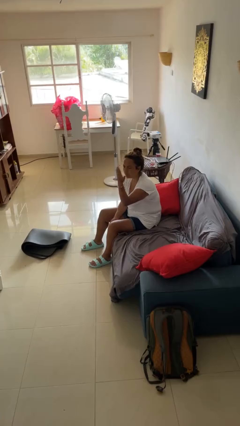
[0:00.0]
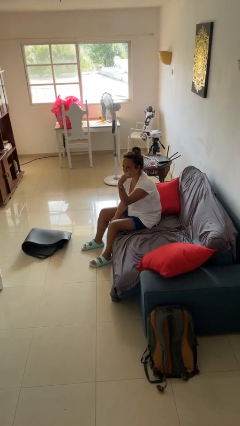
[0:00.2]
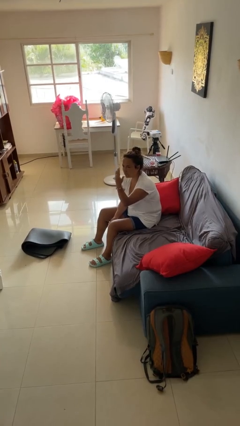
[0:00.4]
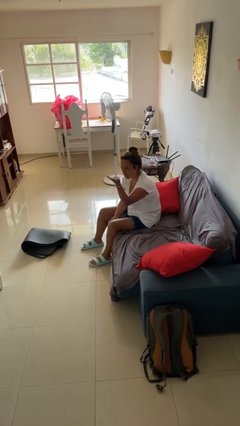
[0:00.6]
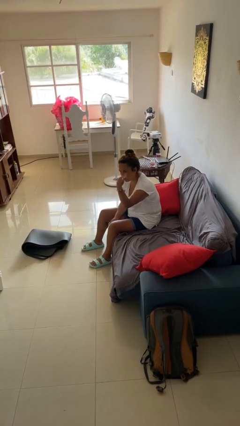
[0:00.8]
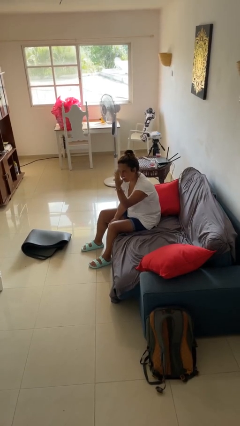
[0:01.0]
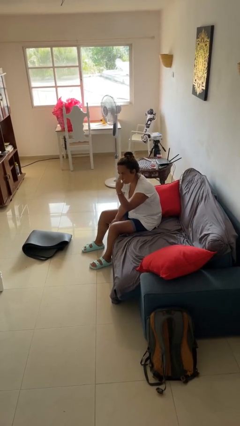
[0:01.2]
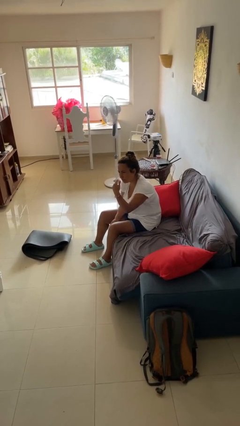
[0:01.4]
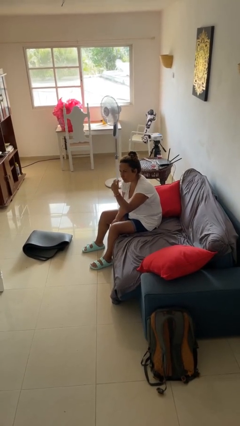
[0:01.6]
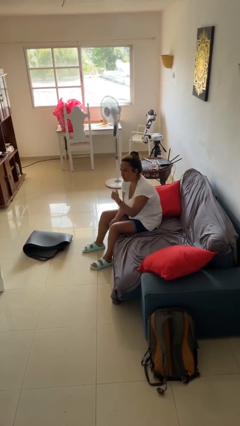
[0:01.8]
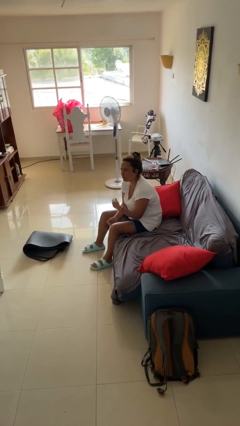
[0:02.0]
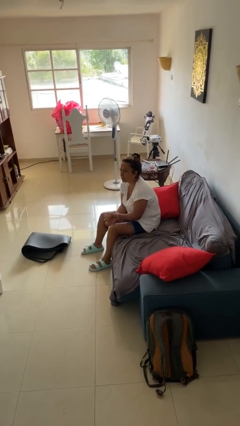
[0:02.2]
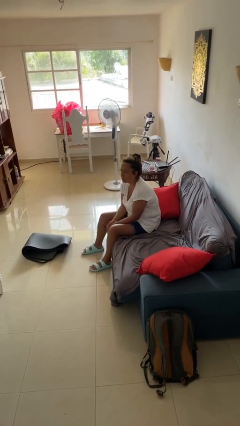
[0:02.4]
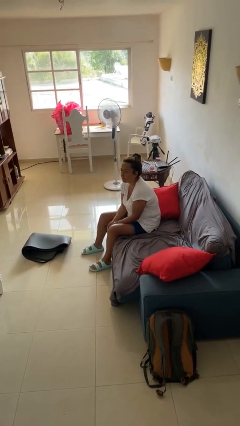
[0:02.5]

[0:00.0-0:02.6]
person gestures come here

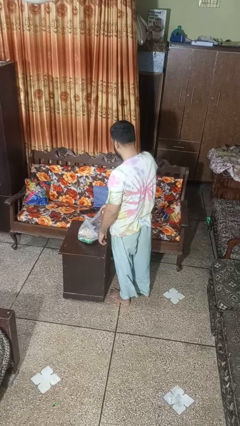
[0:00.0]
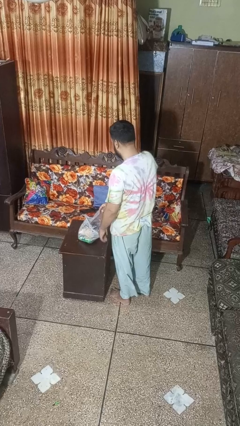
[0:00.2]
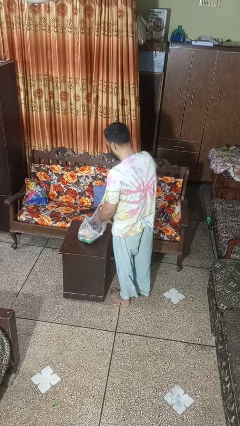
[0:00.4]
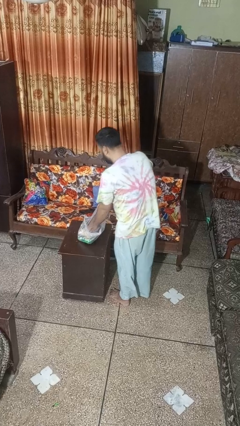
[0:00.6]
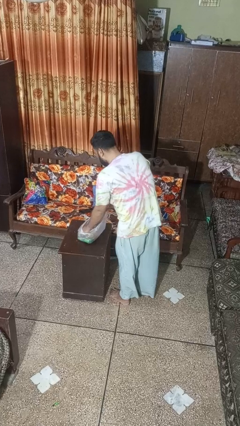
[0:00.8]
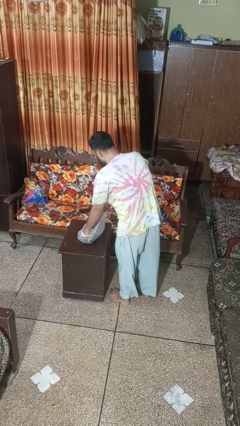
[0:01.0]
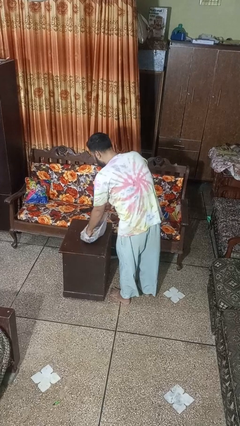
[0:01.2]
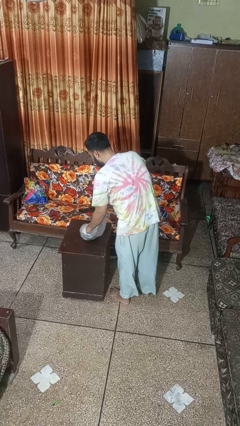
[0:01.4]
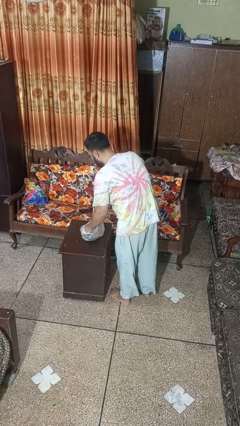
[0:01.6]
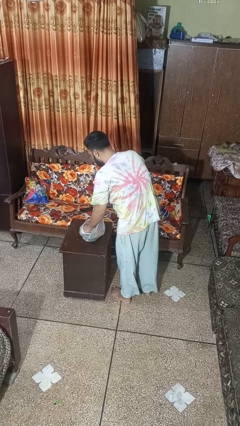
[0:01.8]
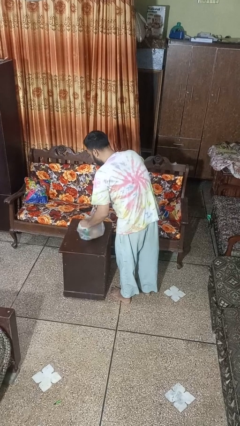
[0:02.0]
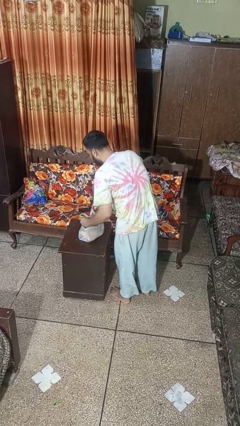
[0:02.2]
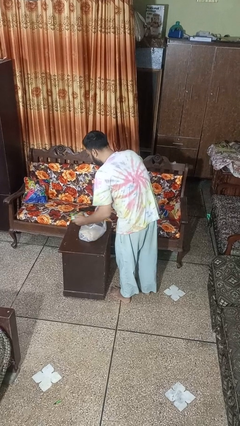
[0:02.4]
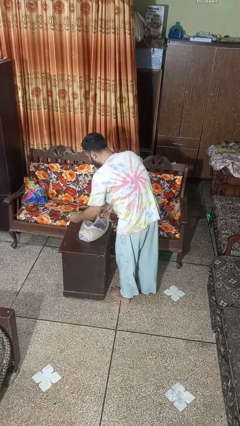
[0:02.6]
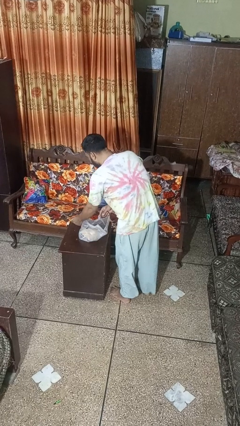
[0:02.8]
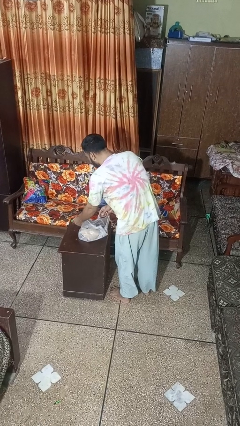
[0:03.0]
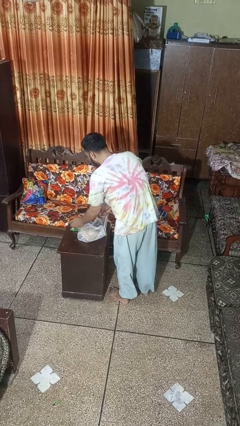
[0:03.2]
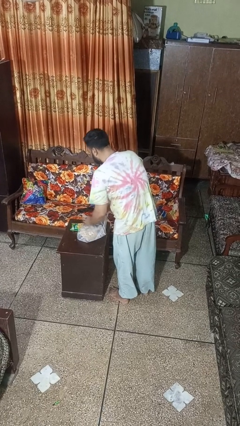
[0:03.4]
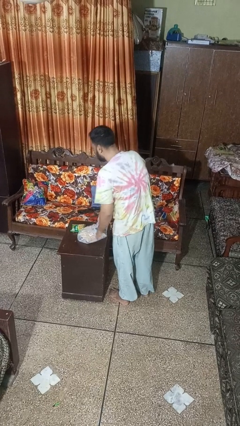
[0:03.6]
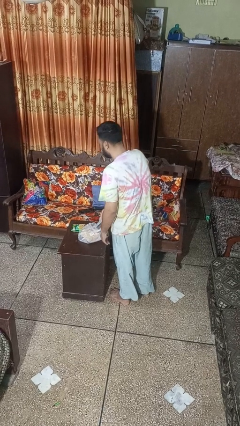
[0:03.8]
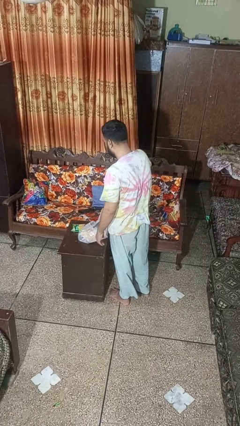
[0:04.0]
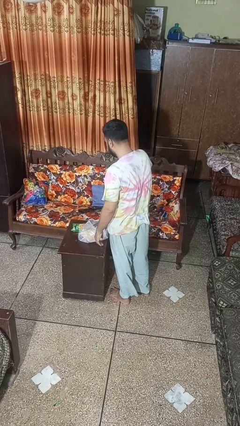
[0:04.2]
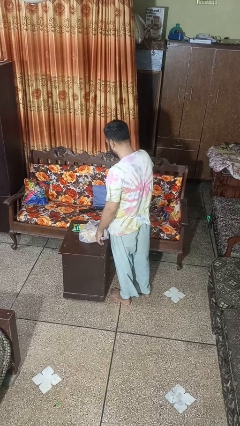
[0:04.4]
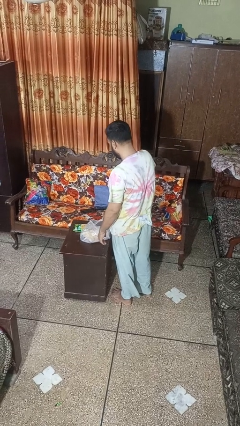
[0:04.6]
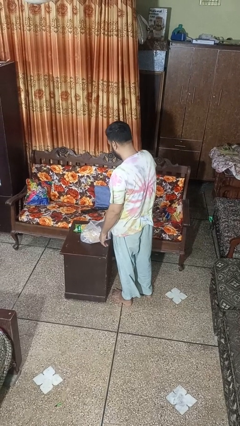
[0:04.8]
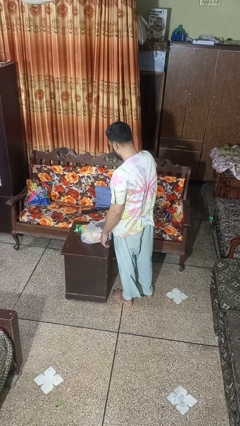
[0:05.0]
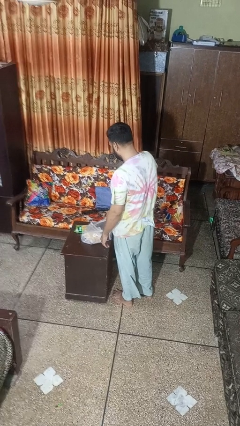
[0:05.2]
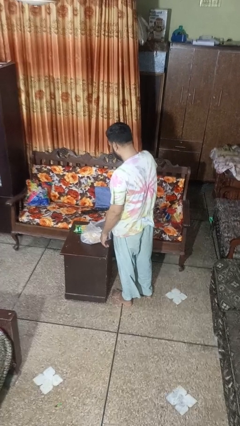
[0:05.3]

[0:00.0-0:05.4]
person takes object from bag

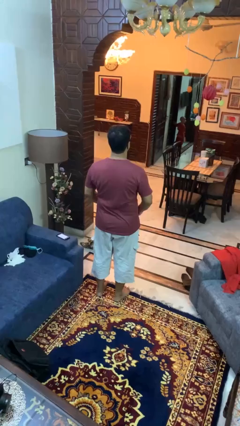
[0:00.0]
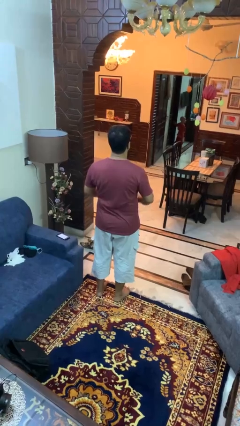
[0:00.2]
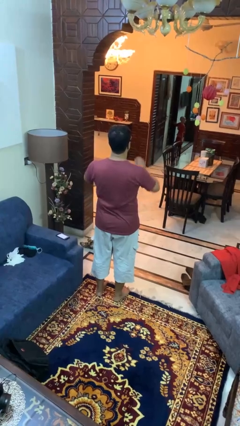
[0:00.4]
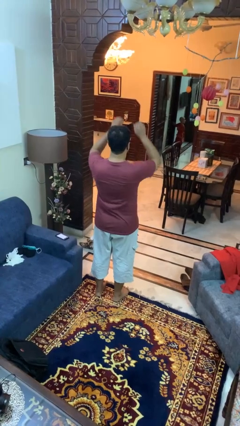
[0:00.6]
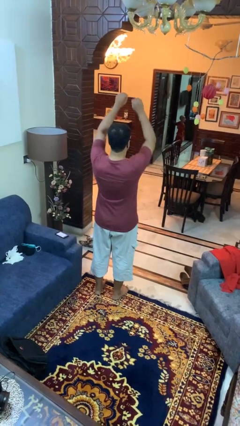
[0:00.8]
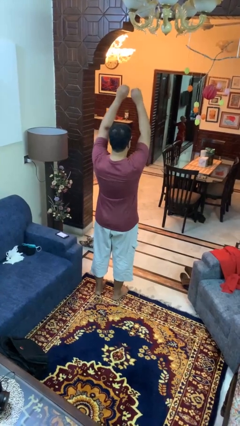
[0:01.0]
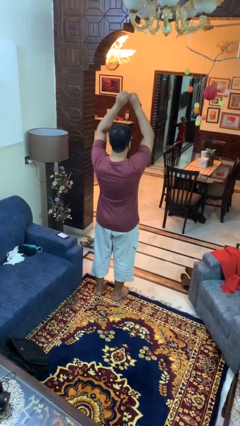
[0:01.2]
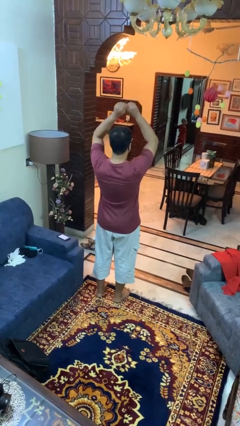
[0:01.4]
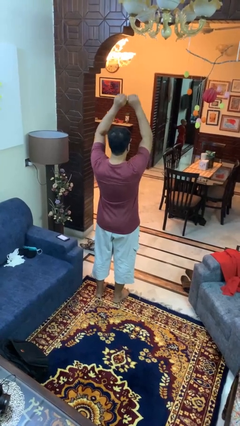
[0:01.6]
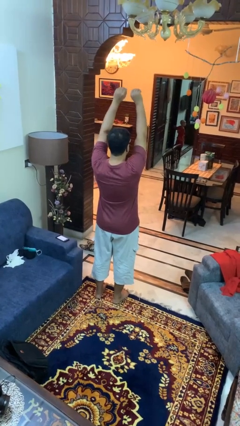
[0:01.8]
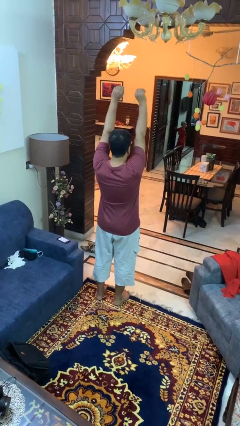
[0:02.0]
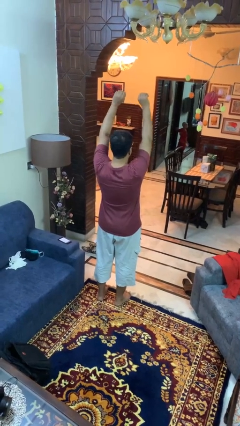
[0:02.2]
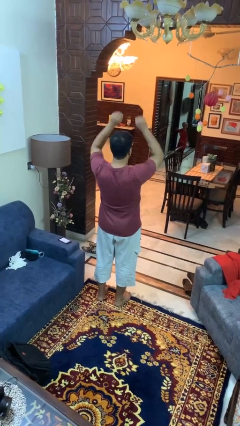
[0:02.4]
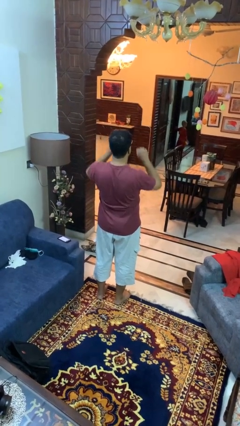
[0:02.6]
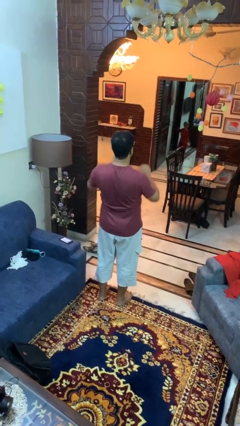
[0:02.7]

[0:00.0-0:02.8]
person stretches arms over head

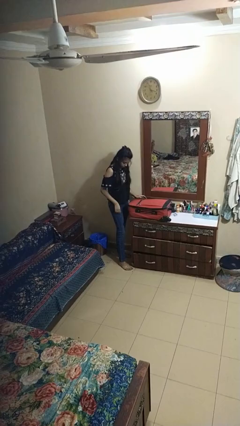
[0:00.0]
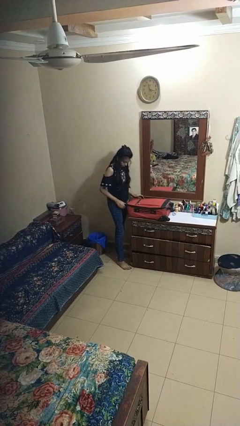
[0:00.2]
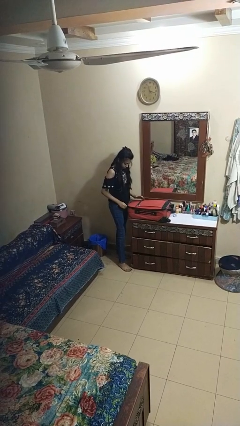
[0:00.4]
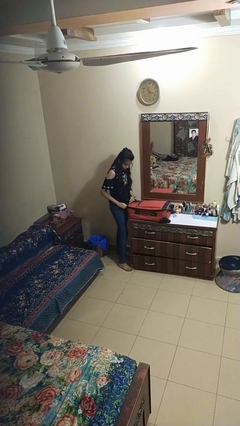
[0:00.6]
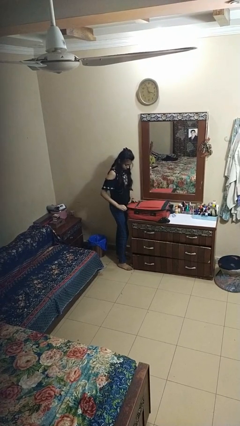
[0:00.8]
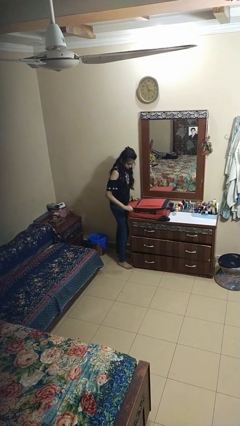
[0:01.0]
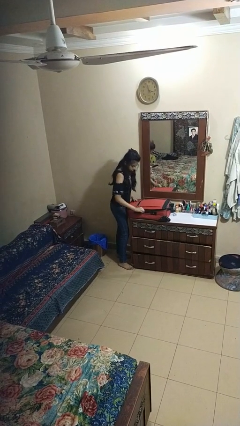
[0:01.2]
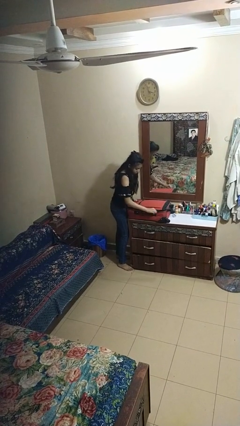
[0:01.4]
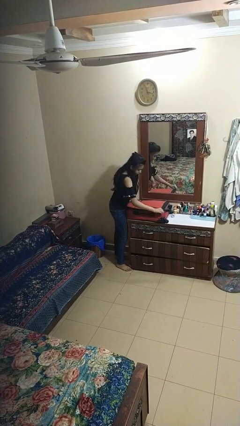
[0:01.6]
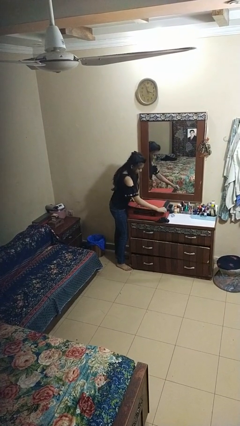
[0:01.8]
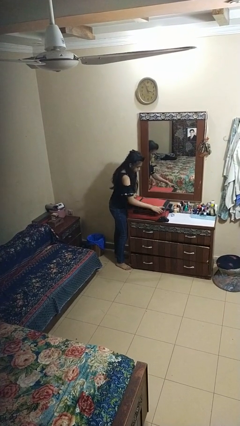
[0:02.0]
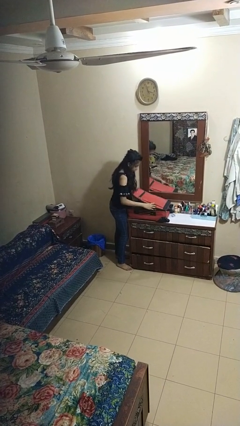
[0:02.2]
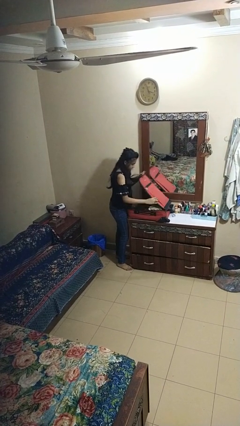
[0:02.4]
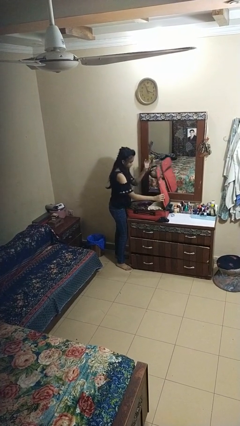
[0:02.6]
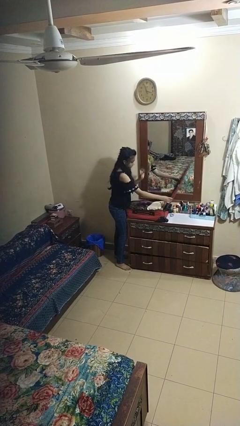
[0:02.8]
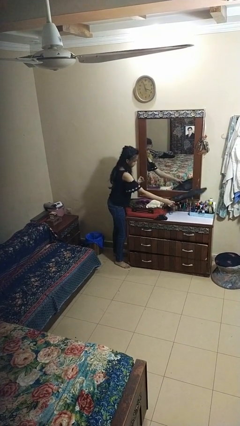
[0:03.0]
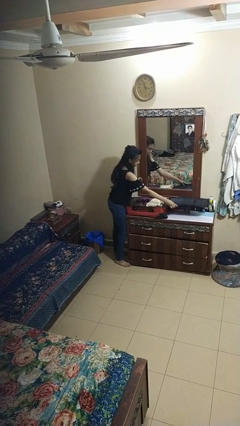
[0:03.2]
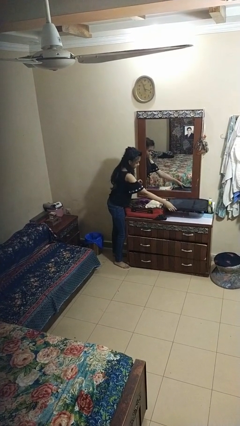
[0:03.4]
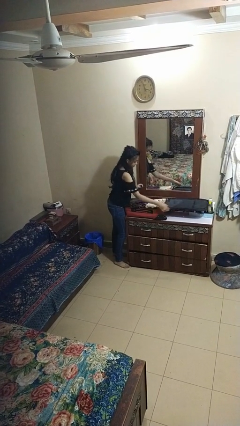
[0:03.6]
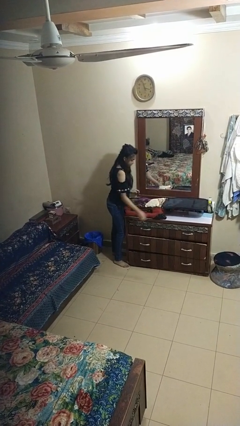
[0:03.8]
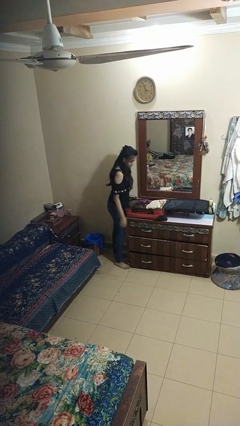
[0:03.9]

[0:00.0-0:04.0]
person opens suitcase

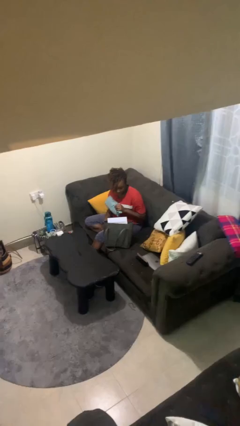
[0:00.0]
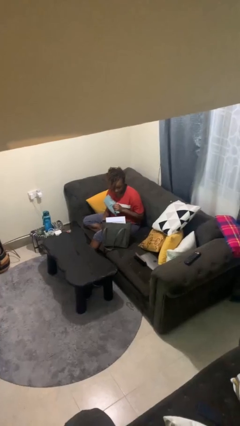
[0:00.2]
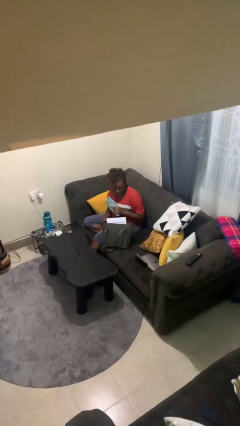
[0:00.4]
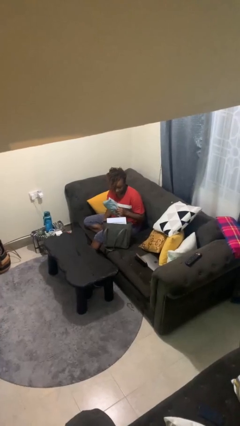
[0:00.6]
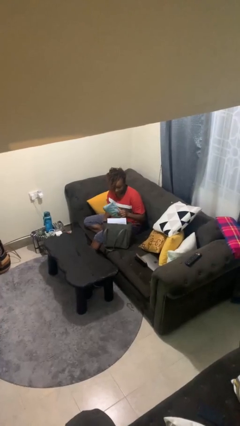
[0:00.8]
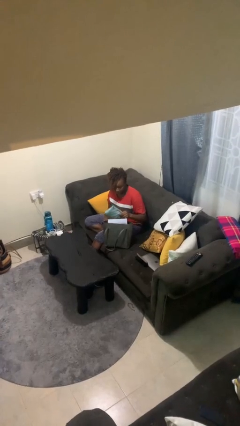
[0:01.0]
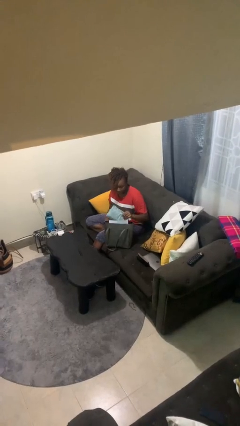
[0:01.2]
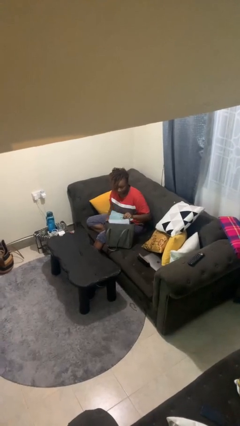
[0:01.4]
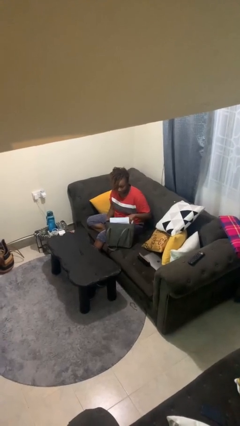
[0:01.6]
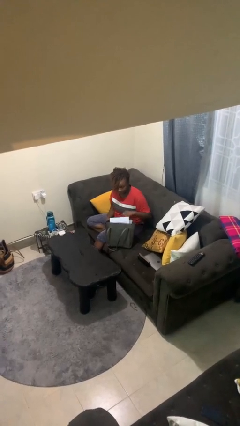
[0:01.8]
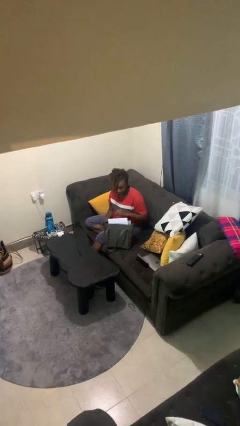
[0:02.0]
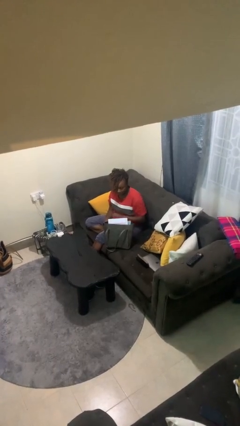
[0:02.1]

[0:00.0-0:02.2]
person puts object into purse

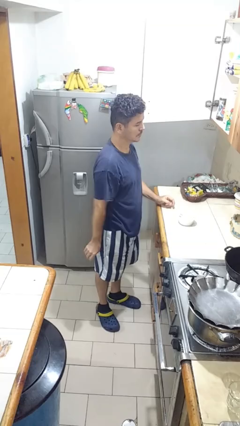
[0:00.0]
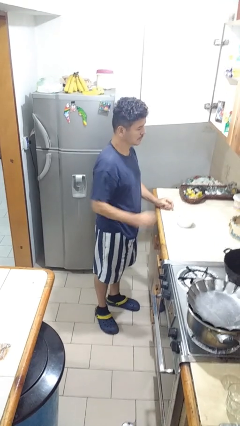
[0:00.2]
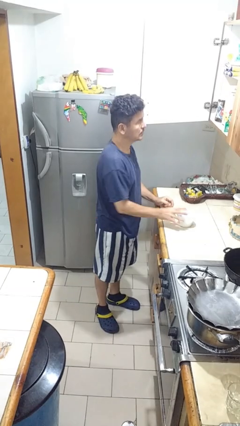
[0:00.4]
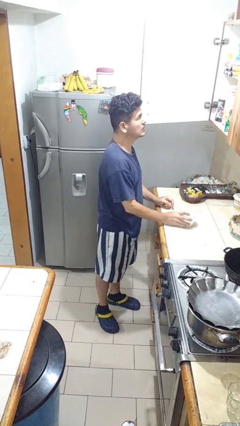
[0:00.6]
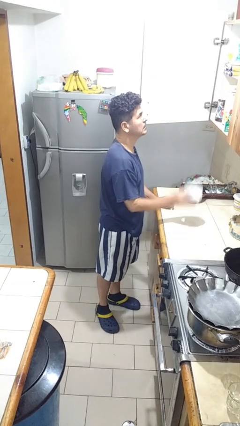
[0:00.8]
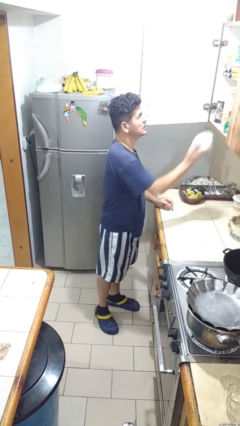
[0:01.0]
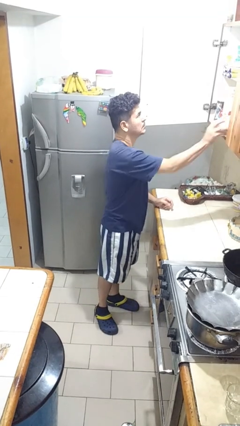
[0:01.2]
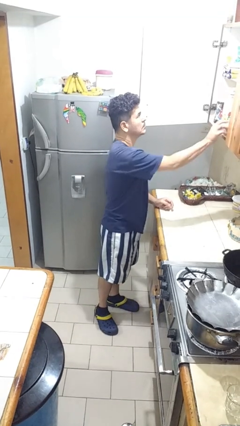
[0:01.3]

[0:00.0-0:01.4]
person puts object in cabinet
